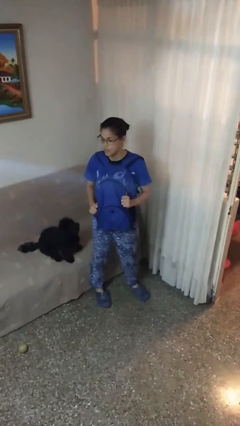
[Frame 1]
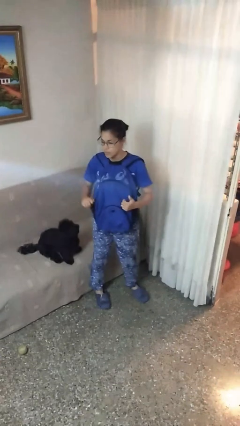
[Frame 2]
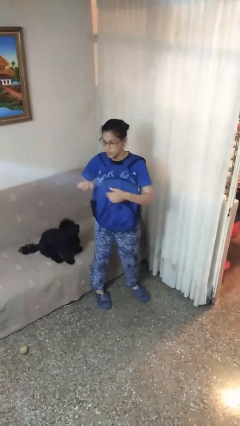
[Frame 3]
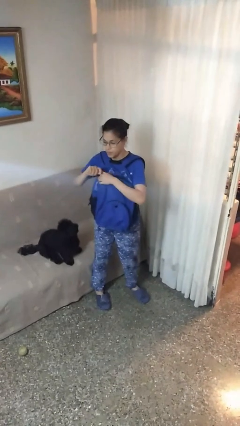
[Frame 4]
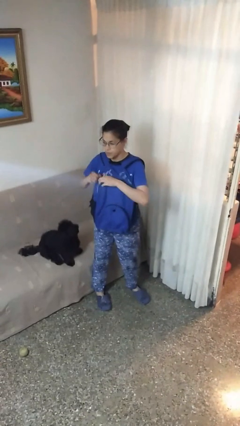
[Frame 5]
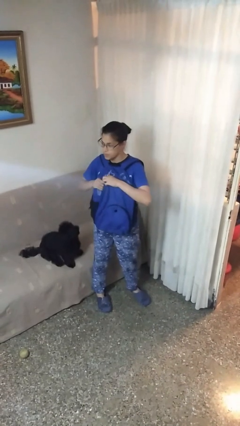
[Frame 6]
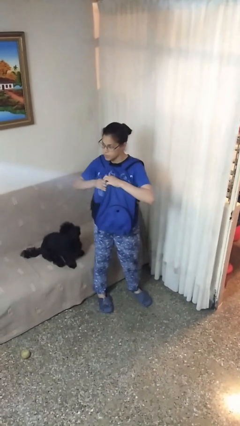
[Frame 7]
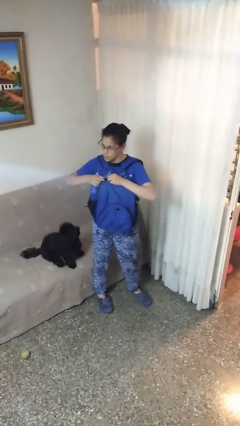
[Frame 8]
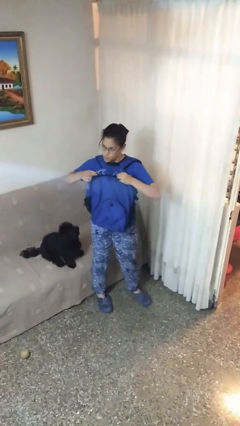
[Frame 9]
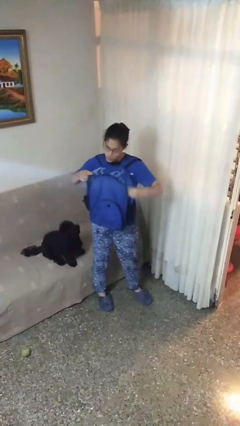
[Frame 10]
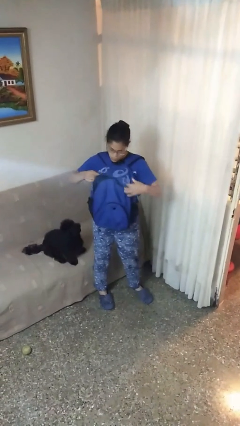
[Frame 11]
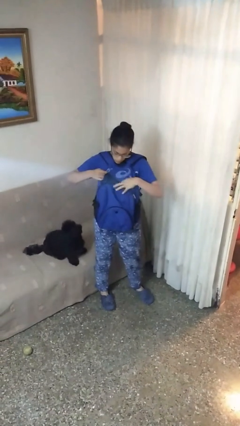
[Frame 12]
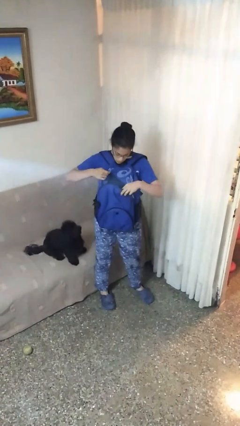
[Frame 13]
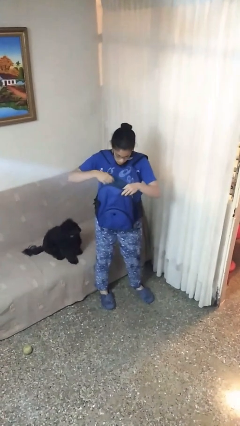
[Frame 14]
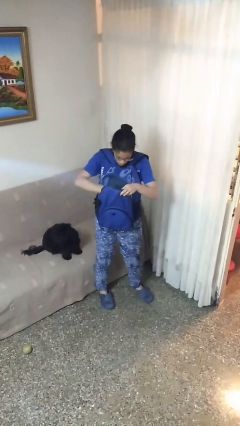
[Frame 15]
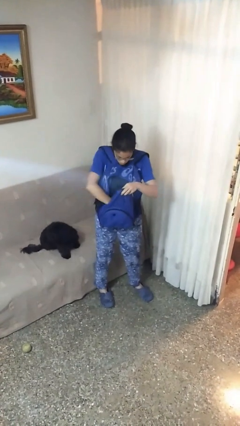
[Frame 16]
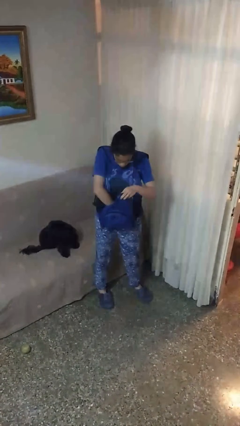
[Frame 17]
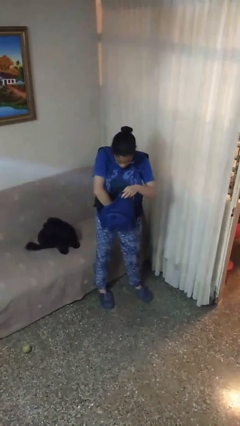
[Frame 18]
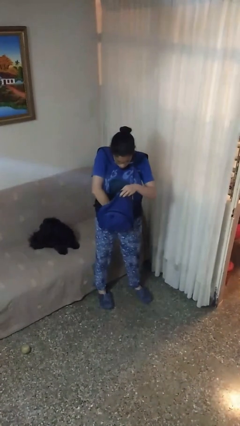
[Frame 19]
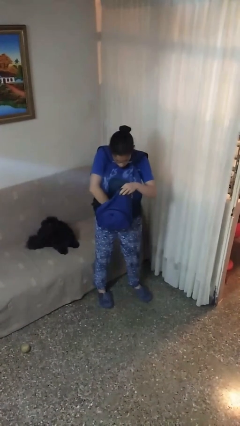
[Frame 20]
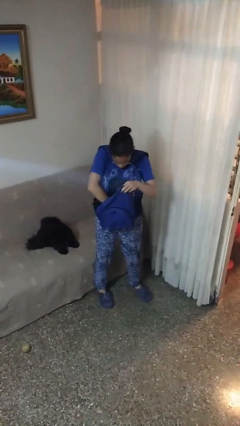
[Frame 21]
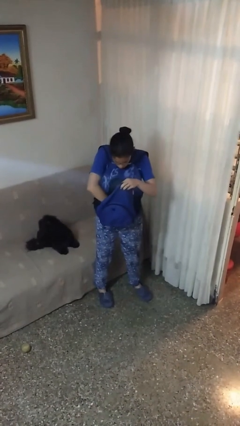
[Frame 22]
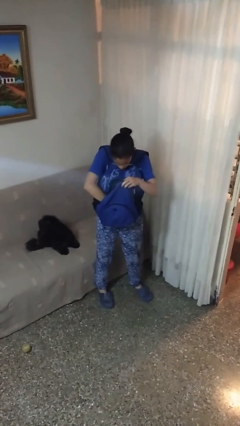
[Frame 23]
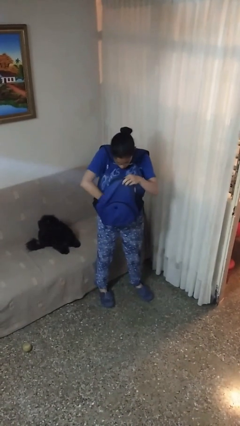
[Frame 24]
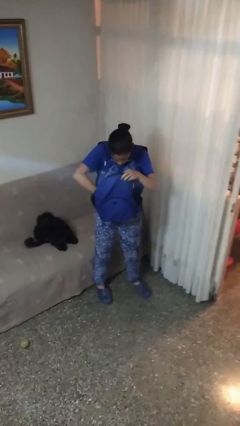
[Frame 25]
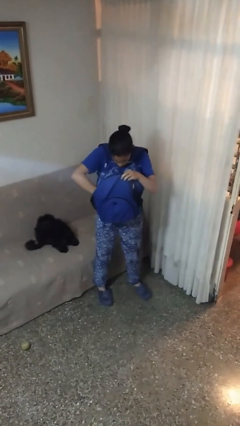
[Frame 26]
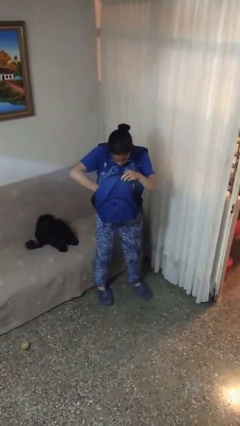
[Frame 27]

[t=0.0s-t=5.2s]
person searches in backpack

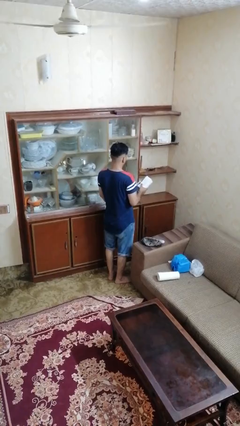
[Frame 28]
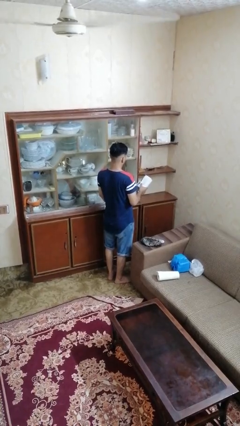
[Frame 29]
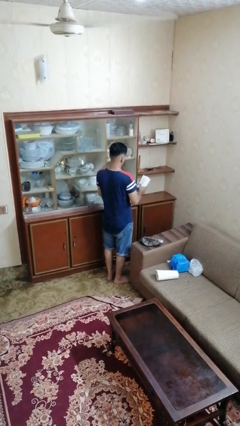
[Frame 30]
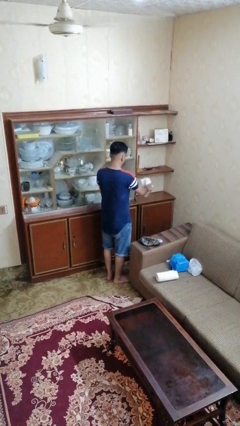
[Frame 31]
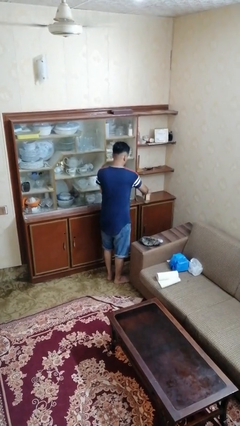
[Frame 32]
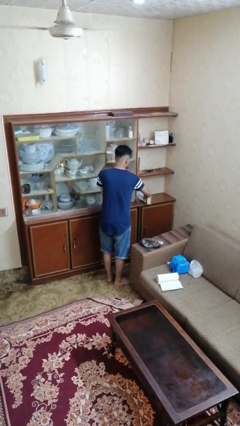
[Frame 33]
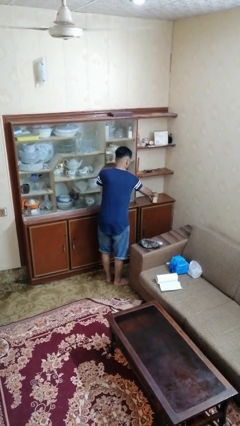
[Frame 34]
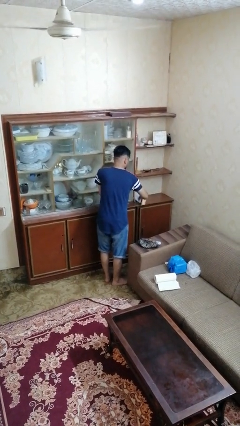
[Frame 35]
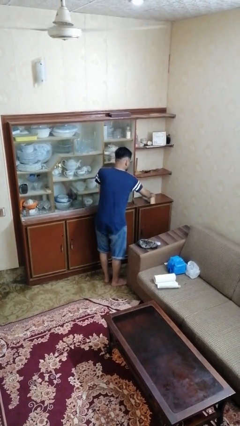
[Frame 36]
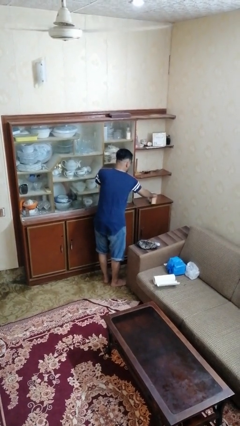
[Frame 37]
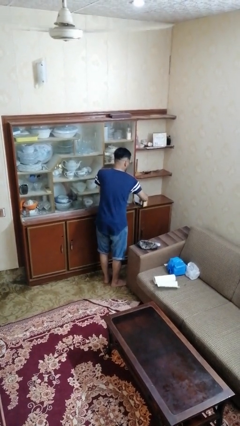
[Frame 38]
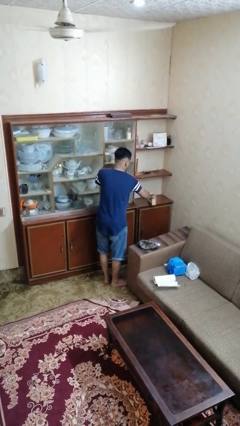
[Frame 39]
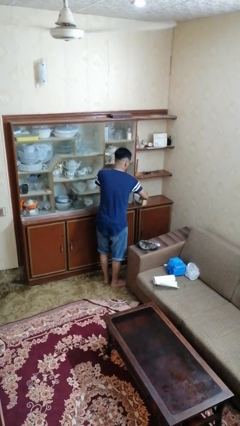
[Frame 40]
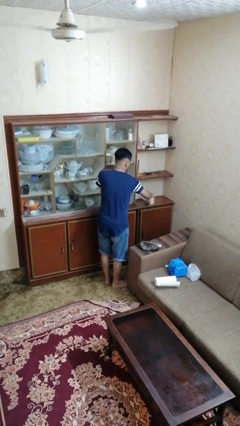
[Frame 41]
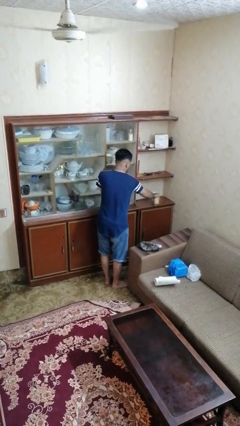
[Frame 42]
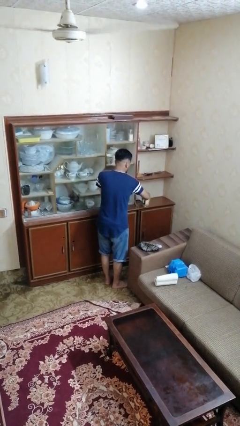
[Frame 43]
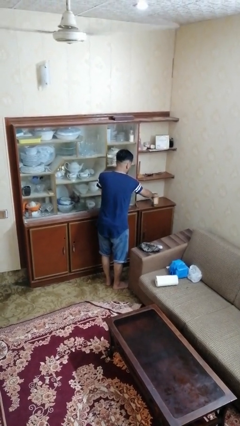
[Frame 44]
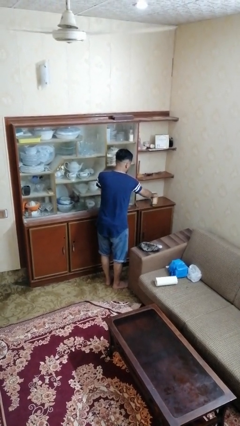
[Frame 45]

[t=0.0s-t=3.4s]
person dusts furniture

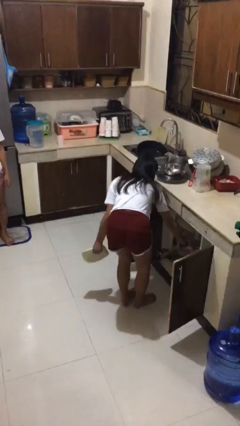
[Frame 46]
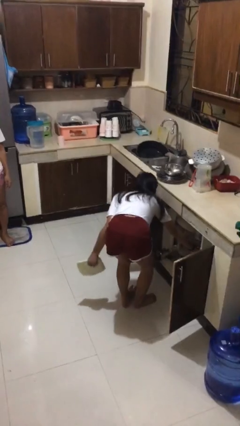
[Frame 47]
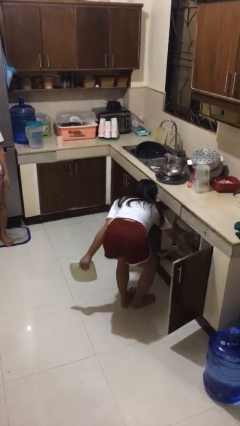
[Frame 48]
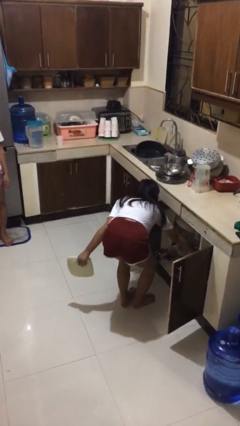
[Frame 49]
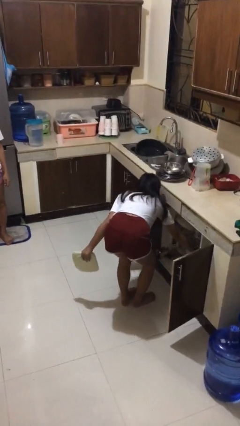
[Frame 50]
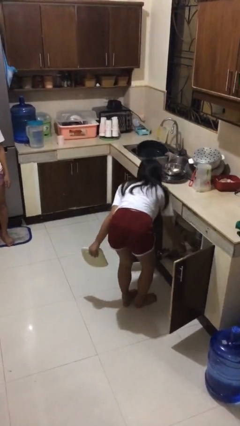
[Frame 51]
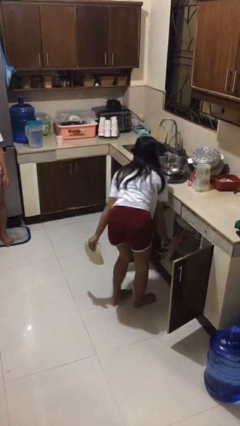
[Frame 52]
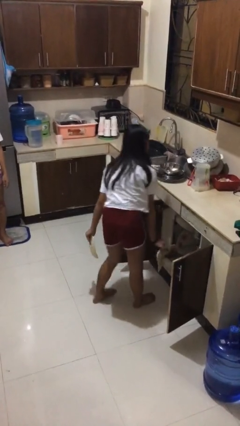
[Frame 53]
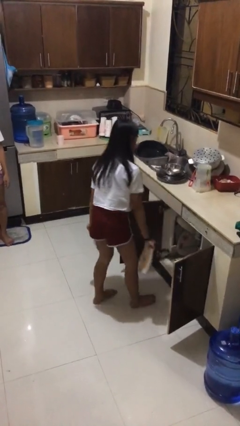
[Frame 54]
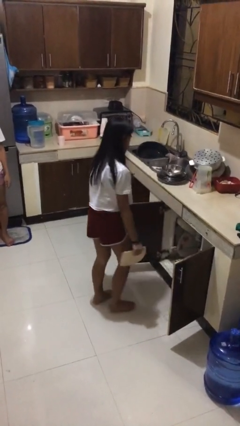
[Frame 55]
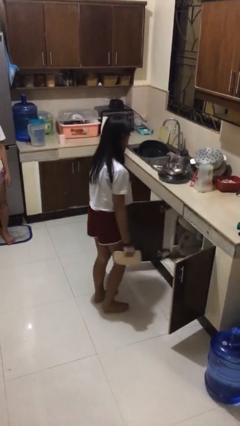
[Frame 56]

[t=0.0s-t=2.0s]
person unloads dishwasher

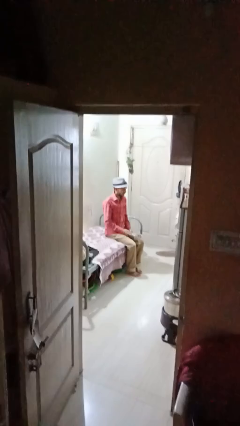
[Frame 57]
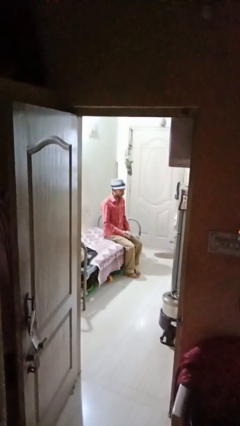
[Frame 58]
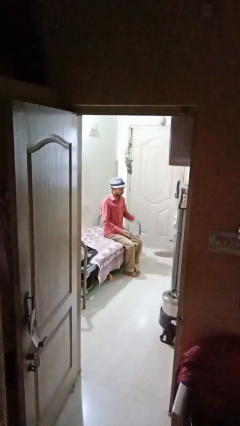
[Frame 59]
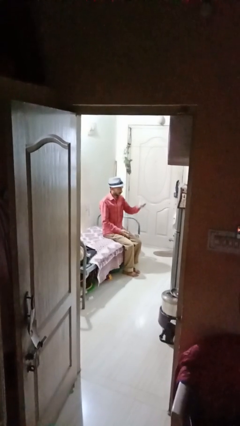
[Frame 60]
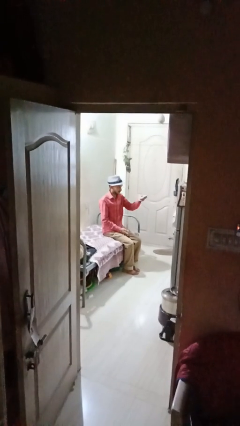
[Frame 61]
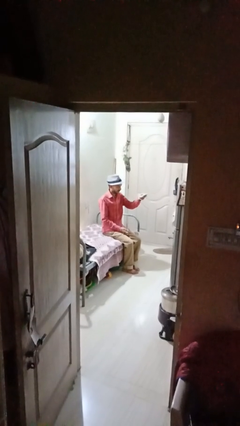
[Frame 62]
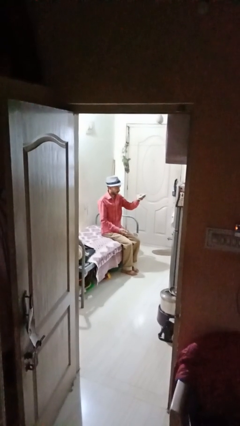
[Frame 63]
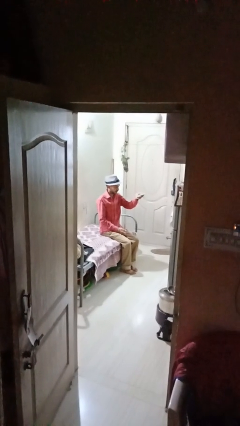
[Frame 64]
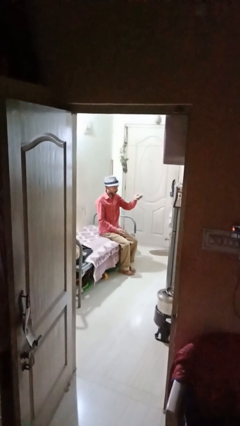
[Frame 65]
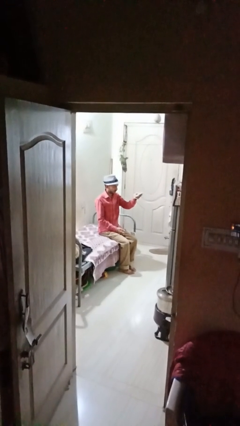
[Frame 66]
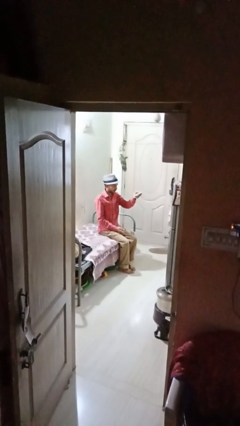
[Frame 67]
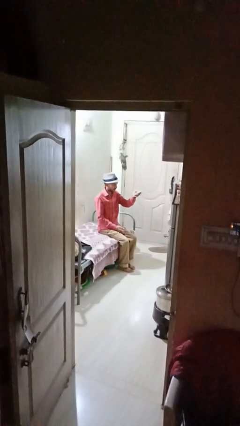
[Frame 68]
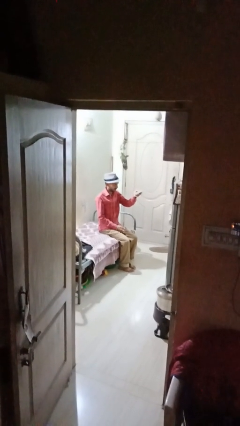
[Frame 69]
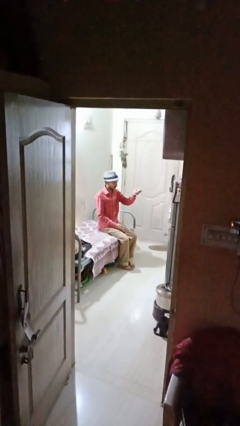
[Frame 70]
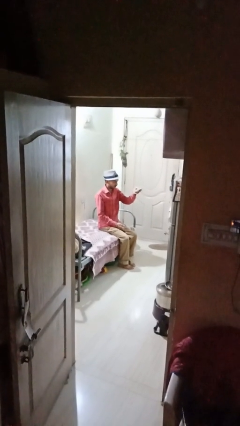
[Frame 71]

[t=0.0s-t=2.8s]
person uses television remote

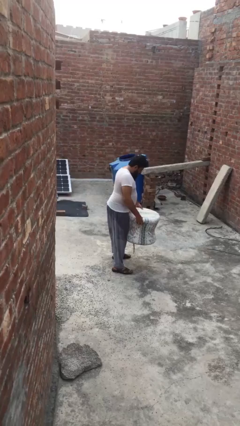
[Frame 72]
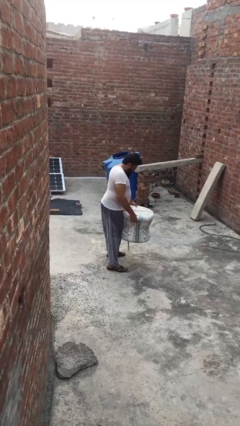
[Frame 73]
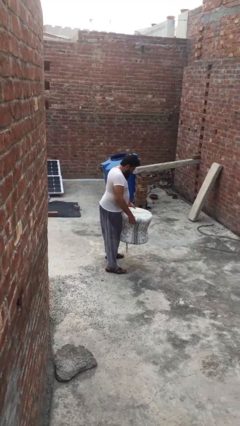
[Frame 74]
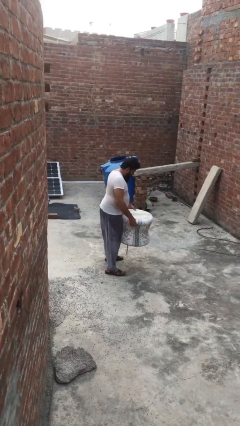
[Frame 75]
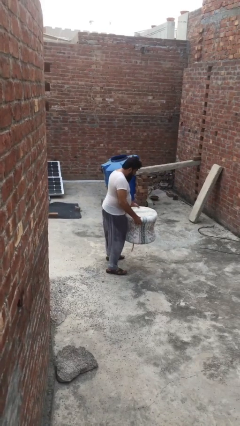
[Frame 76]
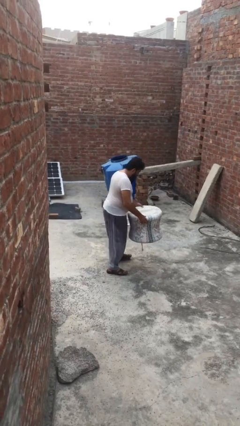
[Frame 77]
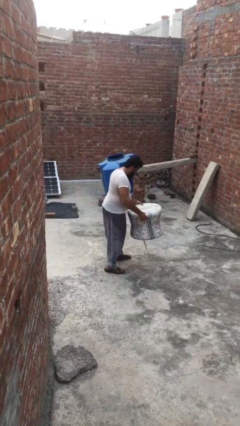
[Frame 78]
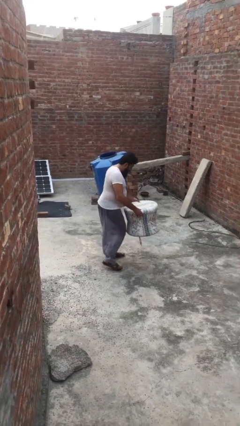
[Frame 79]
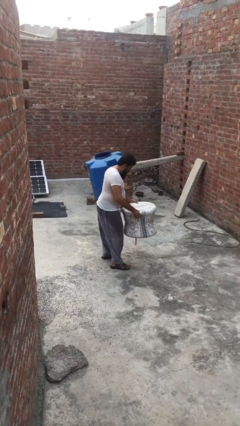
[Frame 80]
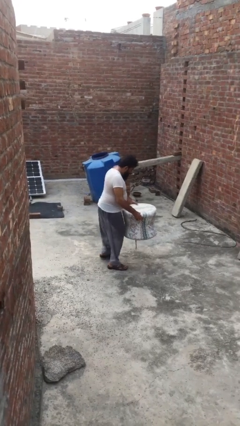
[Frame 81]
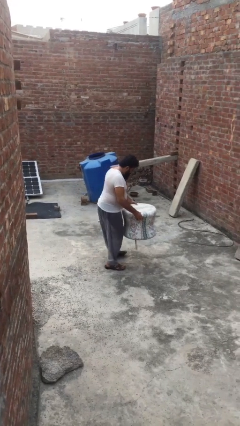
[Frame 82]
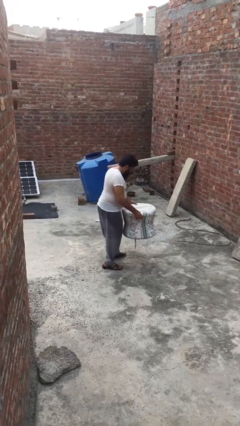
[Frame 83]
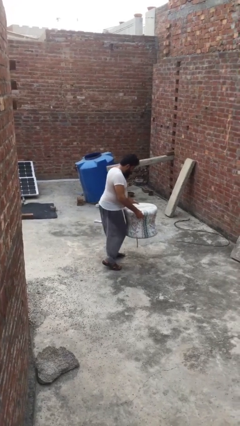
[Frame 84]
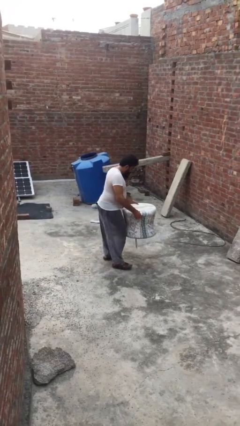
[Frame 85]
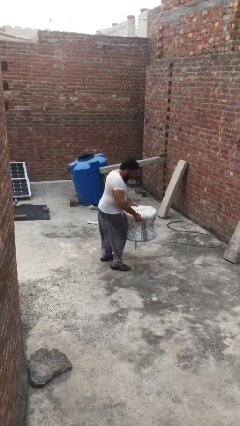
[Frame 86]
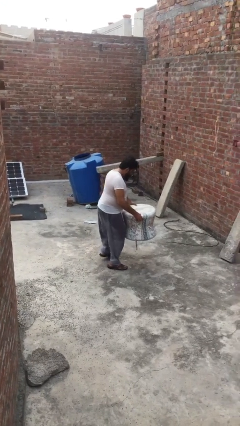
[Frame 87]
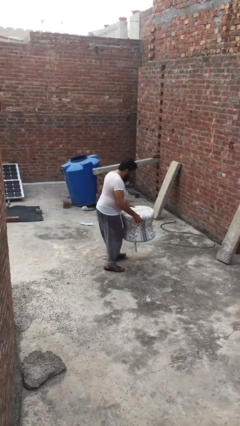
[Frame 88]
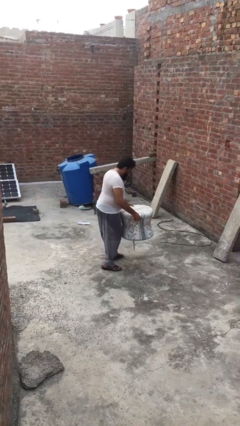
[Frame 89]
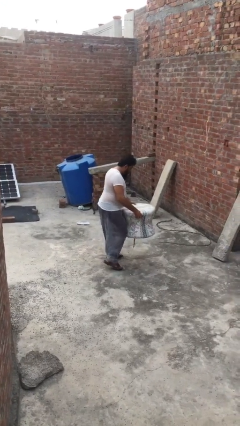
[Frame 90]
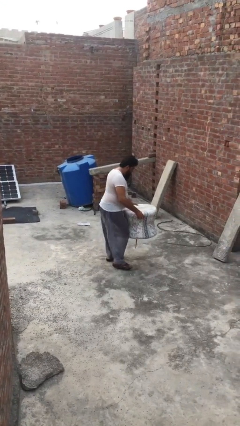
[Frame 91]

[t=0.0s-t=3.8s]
person carries heavy object
